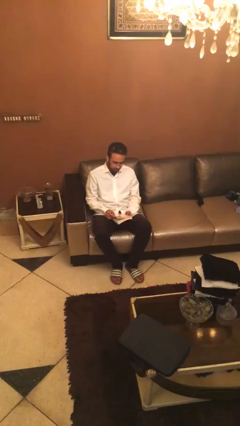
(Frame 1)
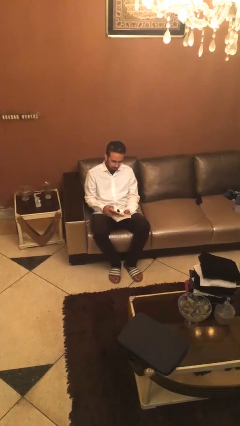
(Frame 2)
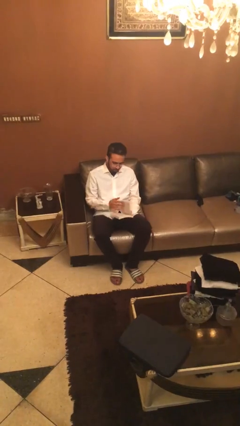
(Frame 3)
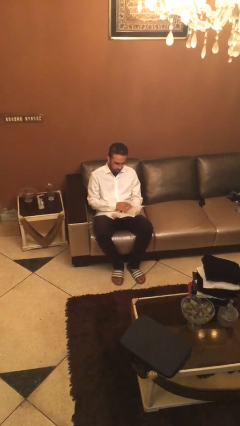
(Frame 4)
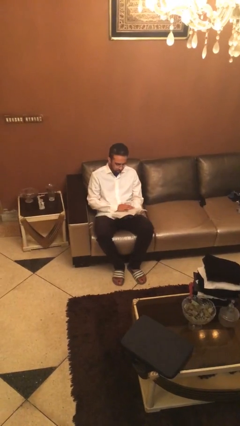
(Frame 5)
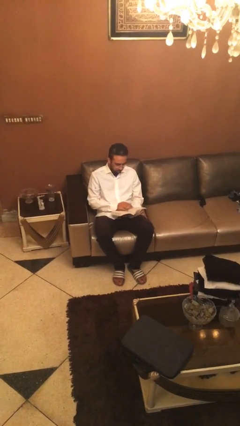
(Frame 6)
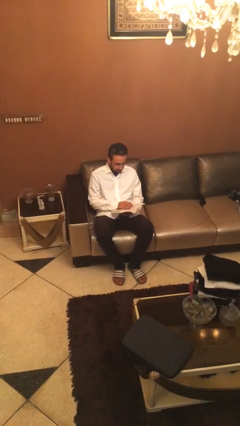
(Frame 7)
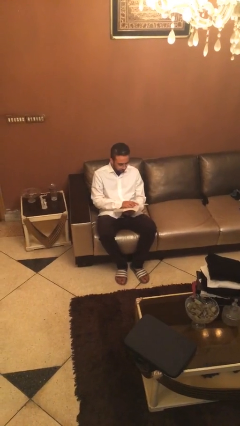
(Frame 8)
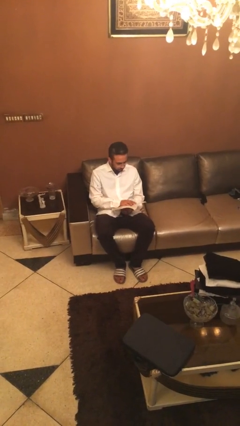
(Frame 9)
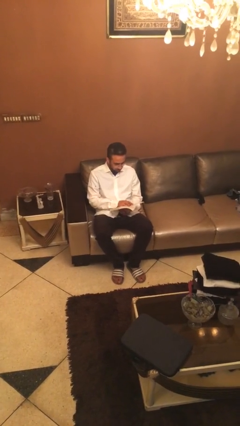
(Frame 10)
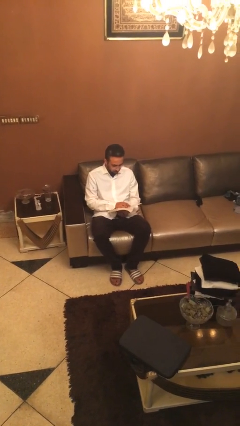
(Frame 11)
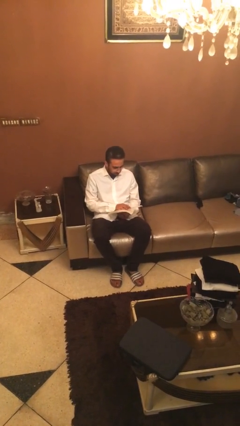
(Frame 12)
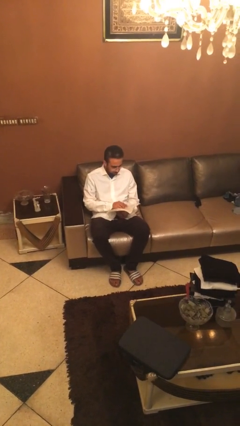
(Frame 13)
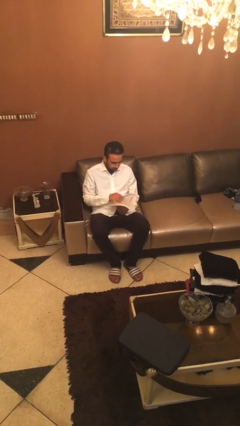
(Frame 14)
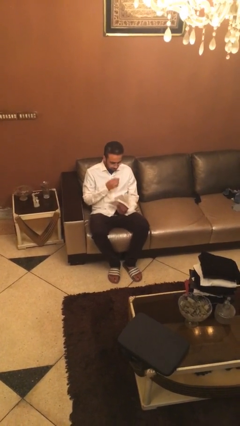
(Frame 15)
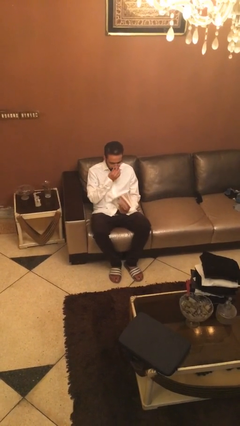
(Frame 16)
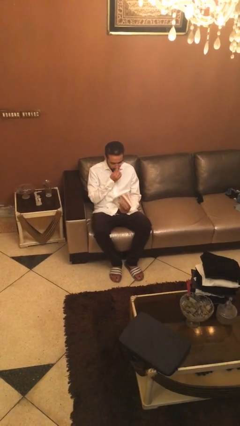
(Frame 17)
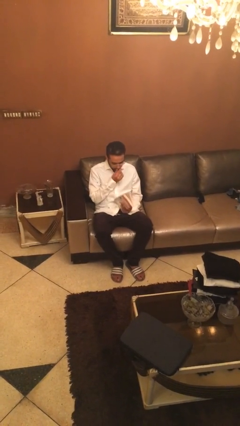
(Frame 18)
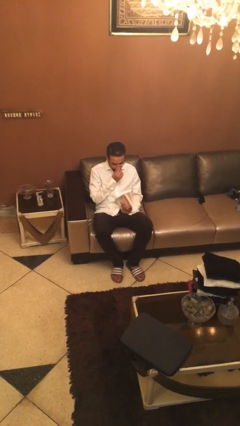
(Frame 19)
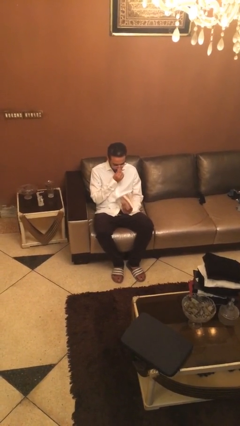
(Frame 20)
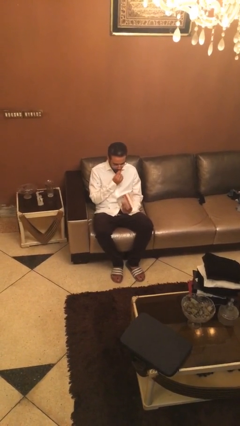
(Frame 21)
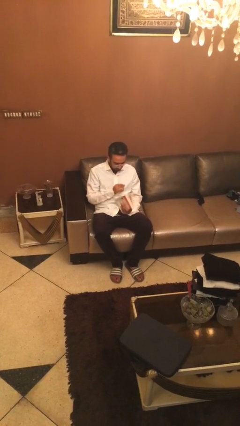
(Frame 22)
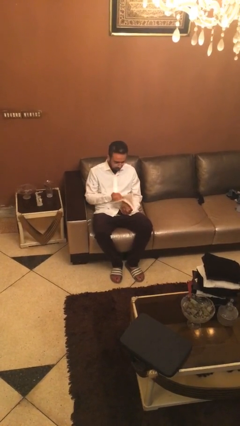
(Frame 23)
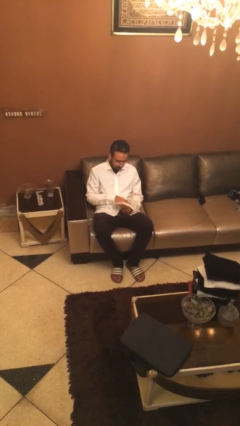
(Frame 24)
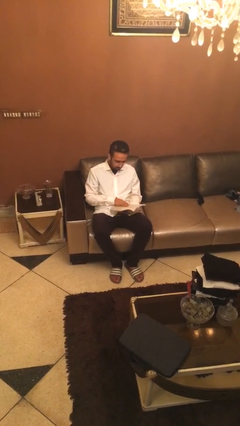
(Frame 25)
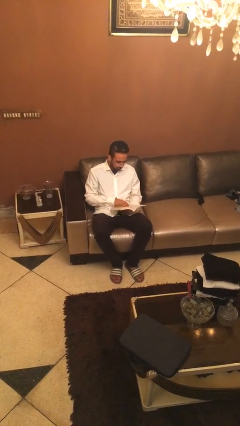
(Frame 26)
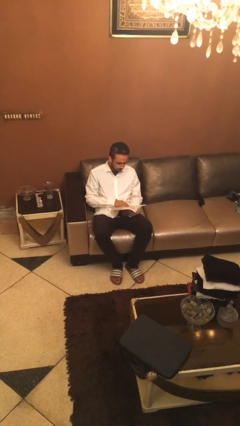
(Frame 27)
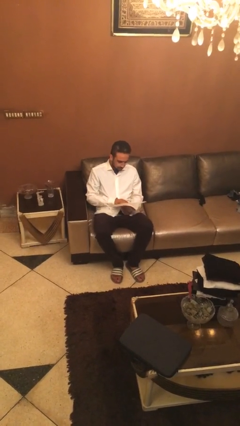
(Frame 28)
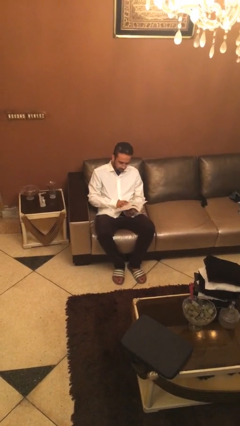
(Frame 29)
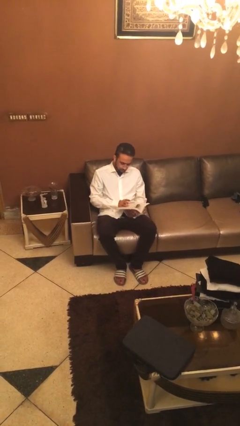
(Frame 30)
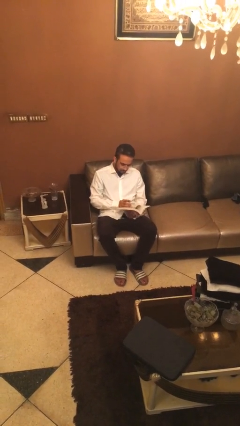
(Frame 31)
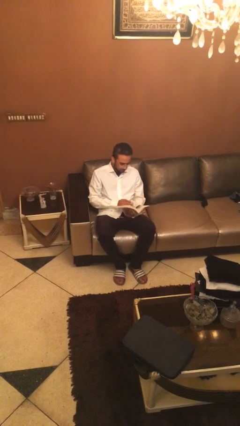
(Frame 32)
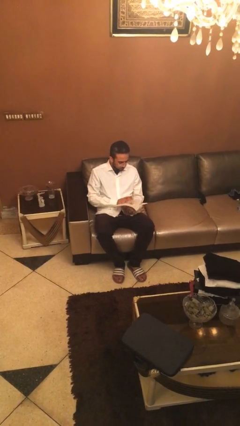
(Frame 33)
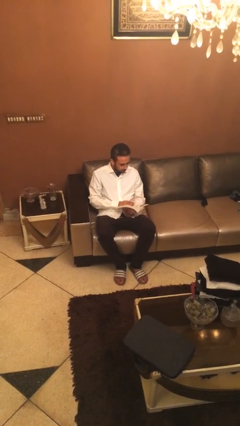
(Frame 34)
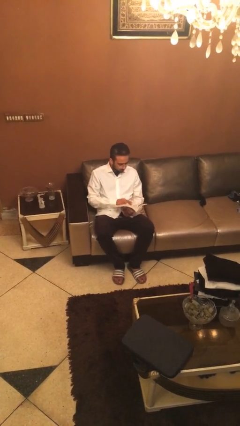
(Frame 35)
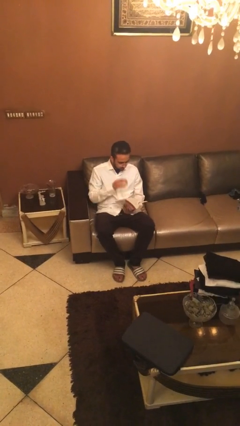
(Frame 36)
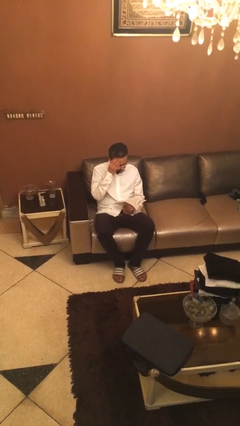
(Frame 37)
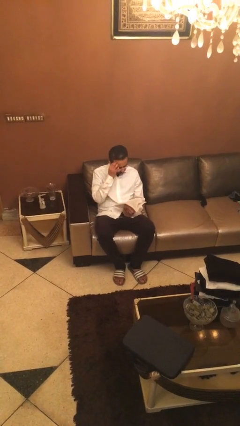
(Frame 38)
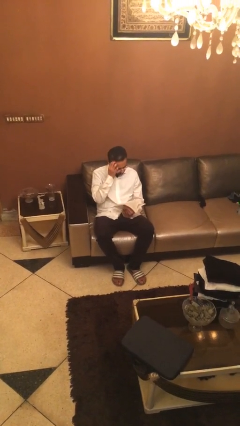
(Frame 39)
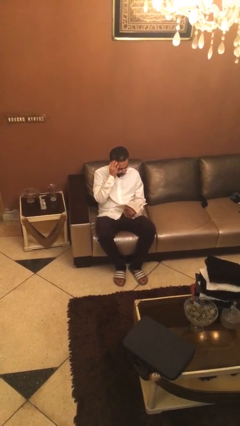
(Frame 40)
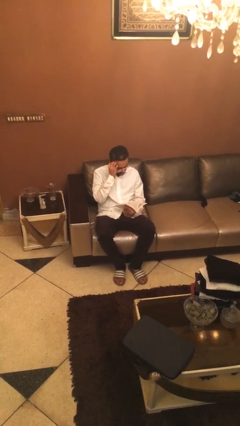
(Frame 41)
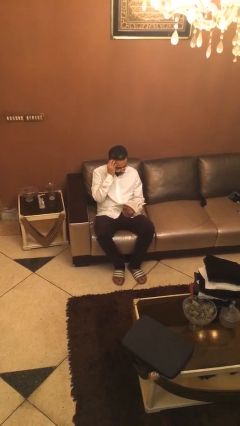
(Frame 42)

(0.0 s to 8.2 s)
person reads document

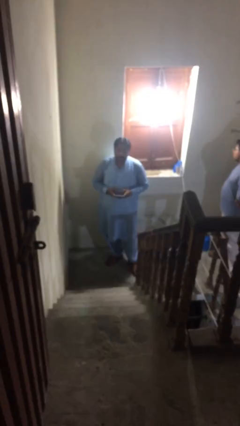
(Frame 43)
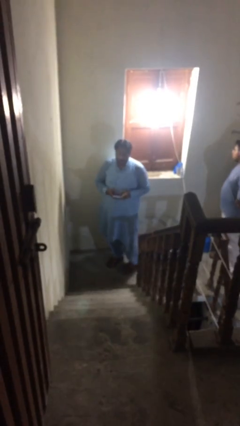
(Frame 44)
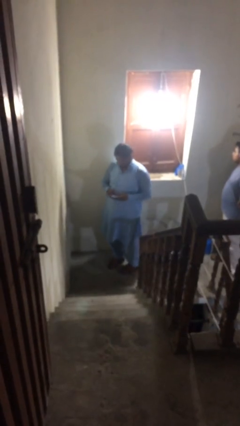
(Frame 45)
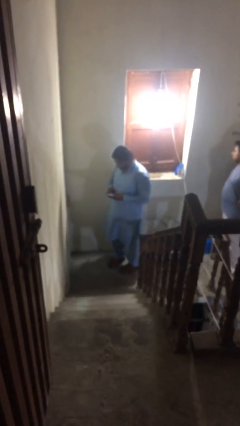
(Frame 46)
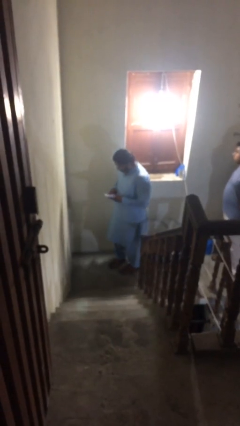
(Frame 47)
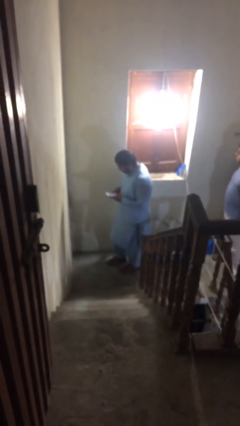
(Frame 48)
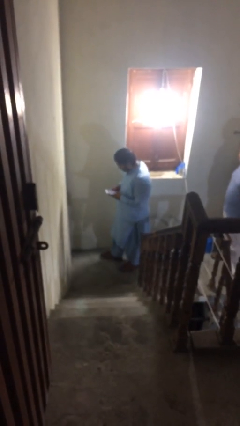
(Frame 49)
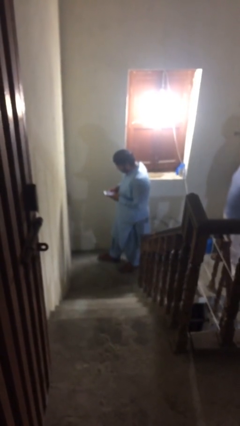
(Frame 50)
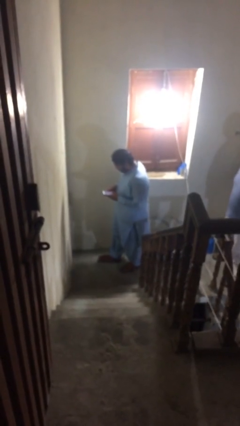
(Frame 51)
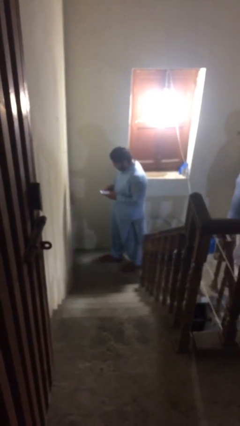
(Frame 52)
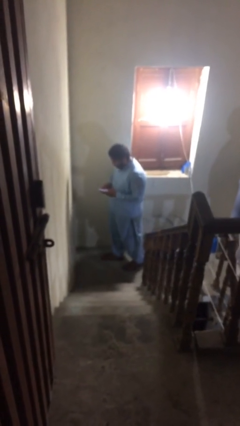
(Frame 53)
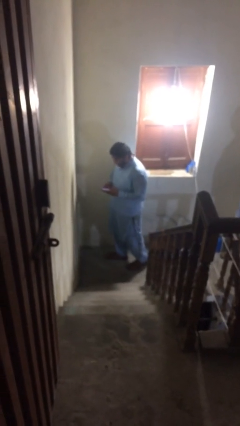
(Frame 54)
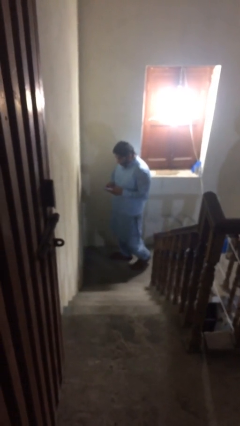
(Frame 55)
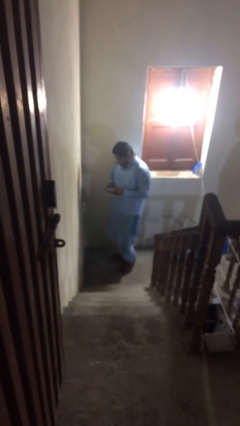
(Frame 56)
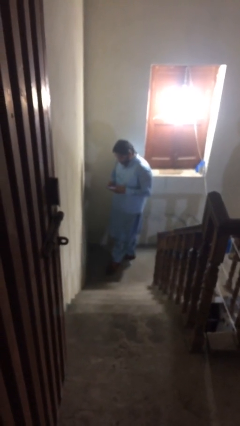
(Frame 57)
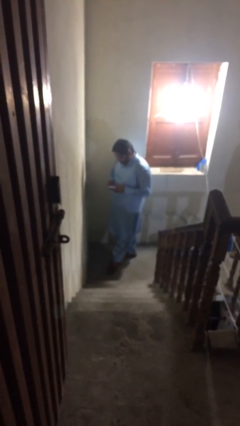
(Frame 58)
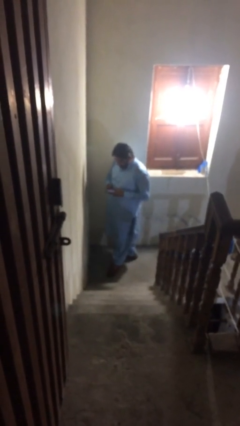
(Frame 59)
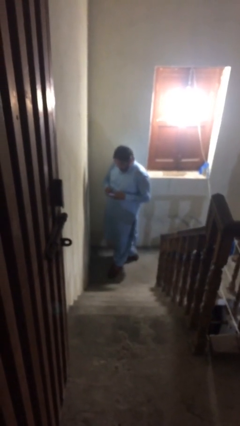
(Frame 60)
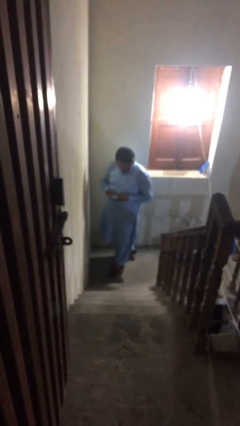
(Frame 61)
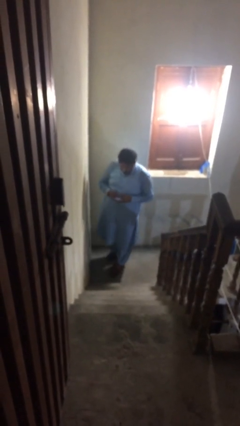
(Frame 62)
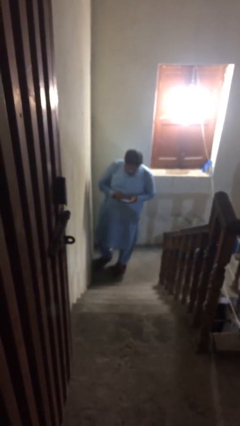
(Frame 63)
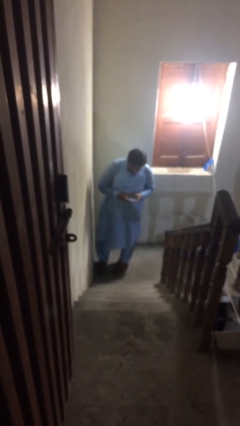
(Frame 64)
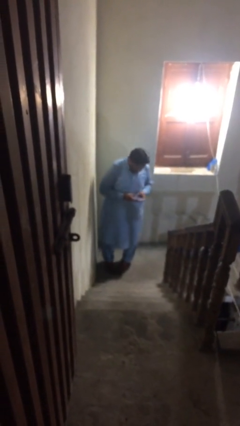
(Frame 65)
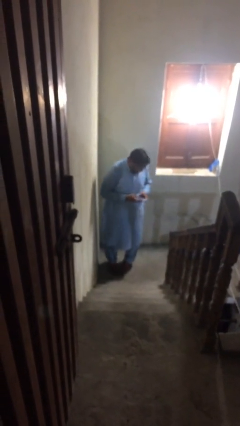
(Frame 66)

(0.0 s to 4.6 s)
person texts on phone

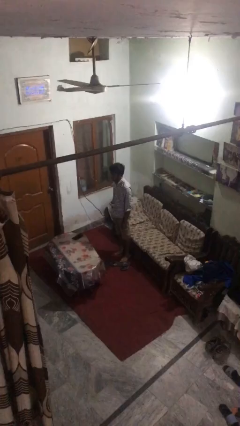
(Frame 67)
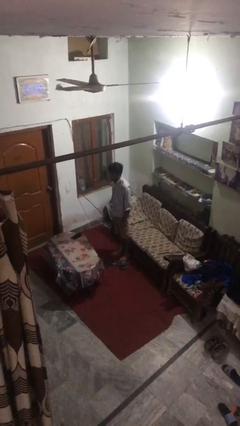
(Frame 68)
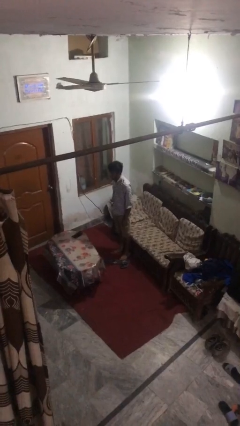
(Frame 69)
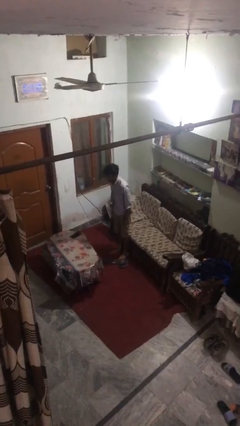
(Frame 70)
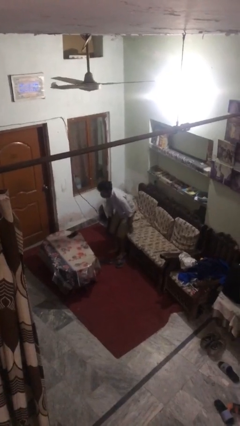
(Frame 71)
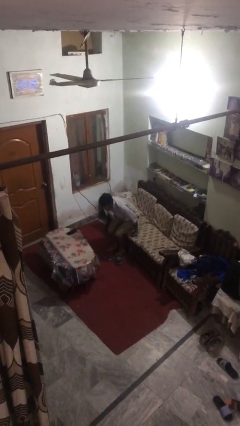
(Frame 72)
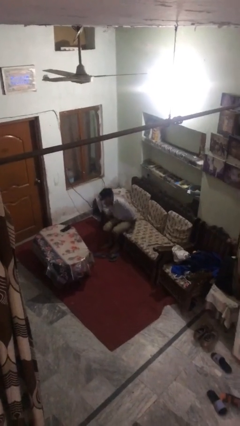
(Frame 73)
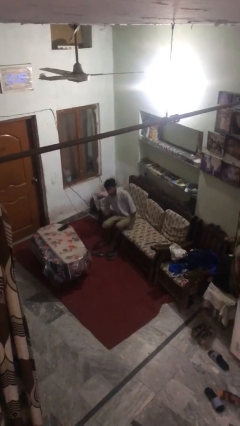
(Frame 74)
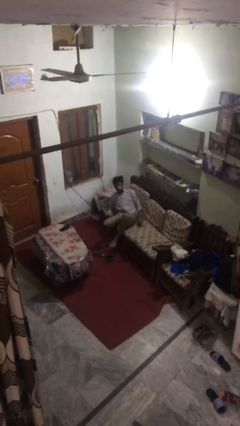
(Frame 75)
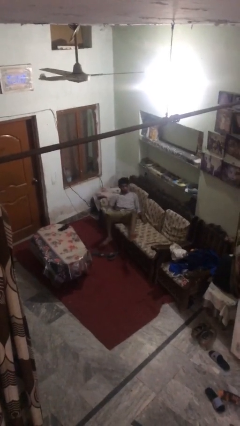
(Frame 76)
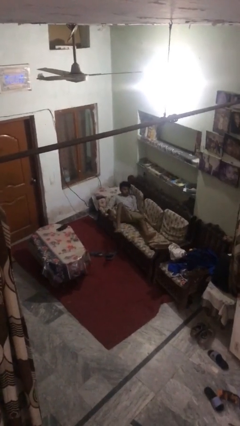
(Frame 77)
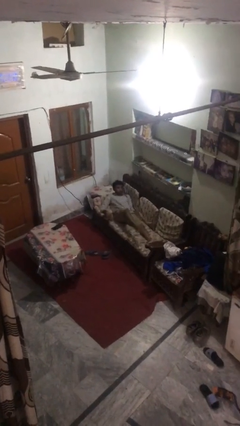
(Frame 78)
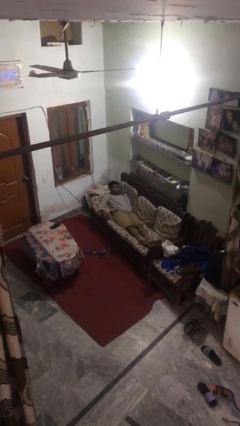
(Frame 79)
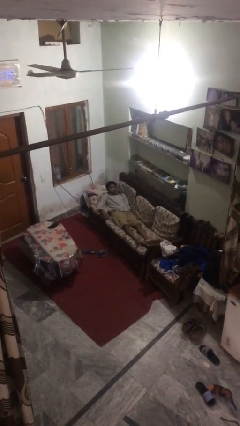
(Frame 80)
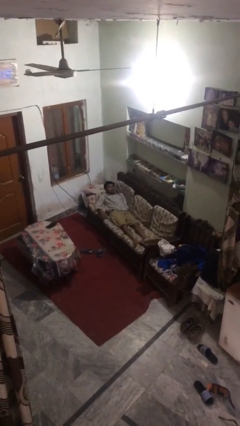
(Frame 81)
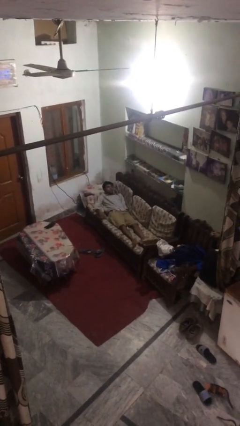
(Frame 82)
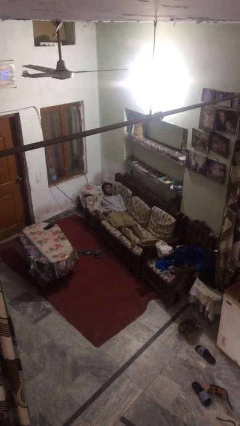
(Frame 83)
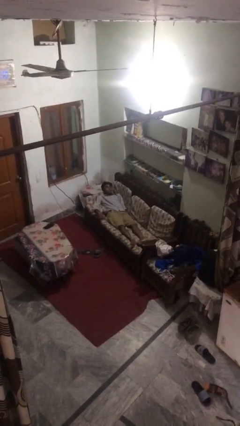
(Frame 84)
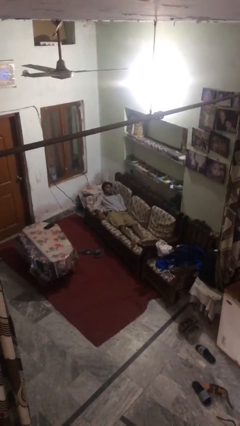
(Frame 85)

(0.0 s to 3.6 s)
person lies down on couch

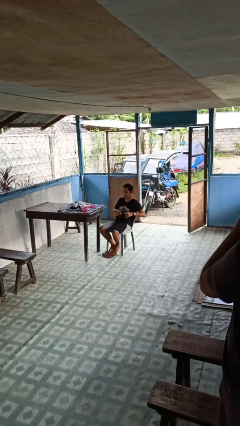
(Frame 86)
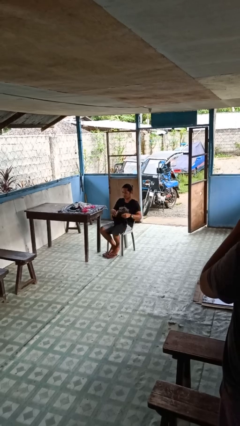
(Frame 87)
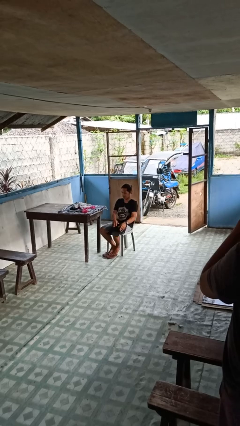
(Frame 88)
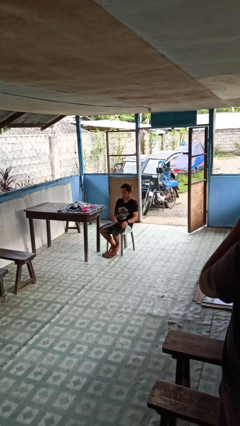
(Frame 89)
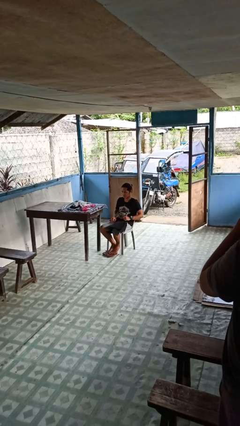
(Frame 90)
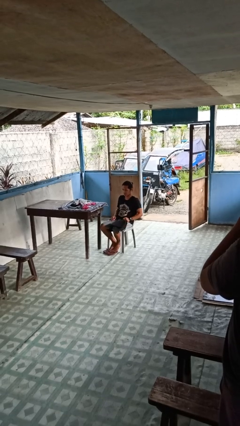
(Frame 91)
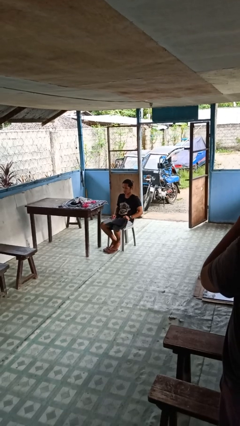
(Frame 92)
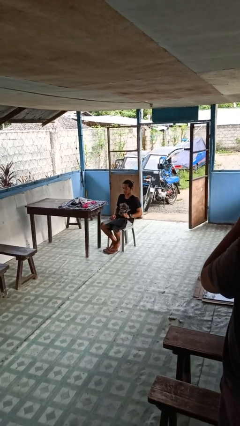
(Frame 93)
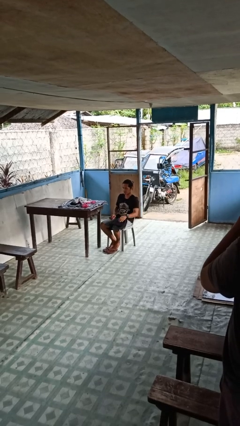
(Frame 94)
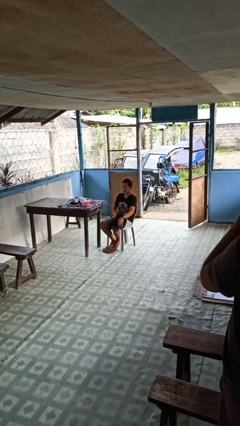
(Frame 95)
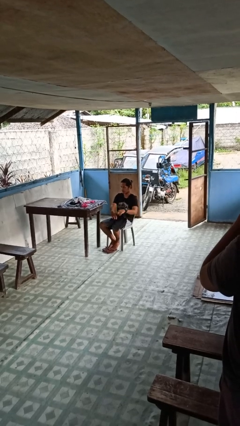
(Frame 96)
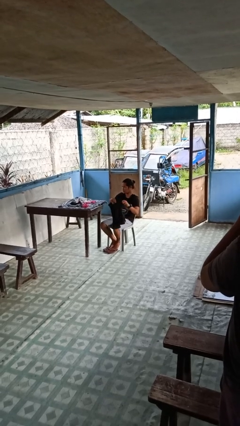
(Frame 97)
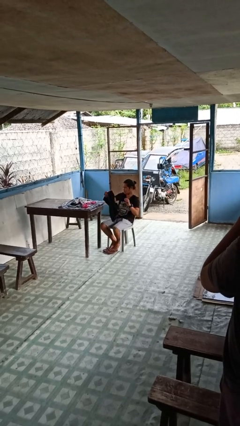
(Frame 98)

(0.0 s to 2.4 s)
person folds pants
